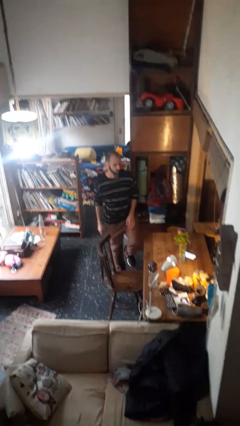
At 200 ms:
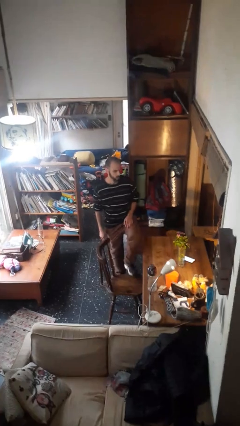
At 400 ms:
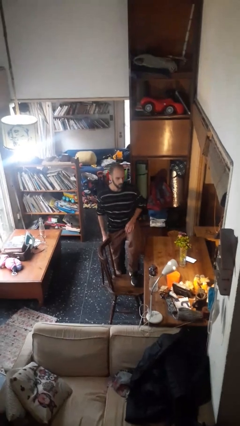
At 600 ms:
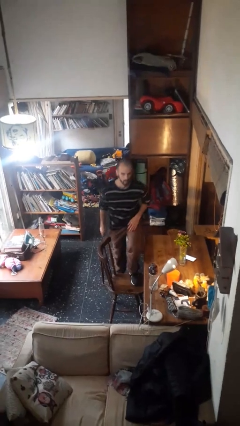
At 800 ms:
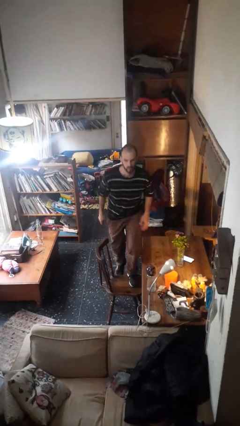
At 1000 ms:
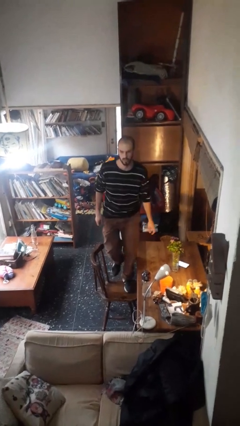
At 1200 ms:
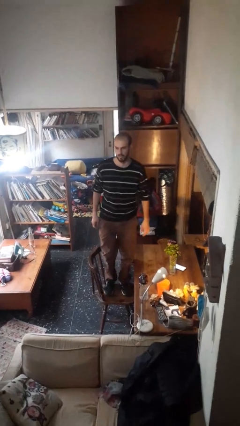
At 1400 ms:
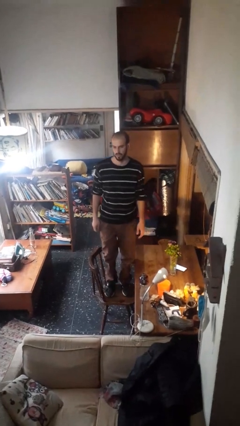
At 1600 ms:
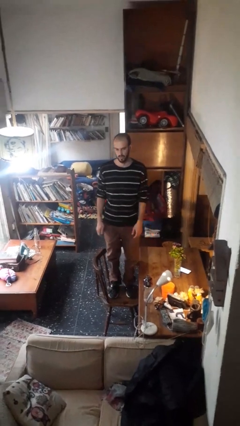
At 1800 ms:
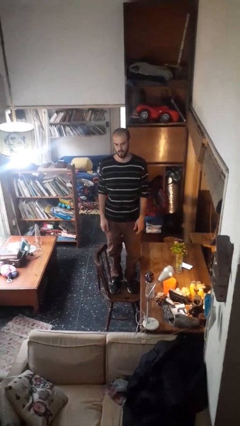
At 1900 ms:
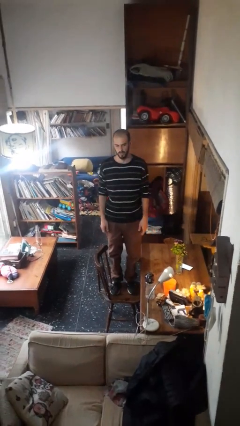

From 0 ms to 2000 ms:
person climbs on chair

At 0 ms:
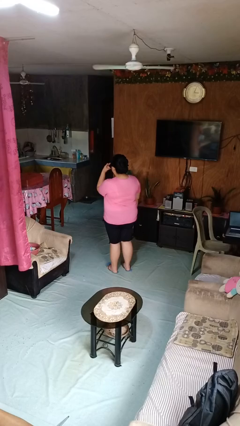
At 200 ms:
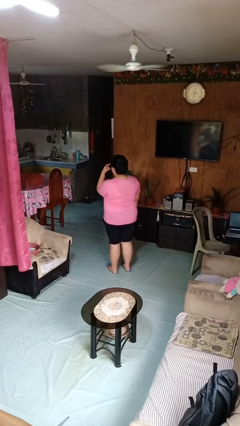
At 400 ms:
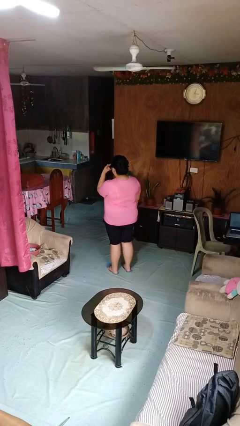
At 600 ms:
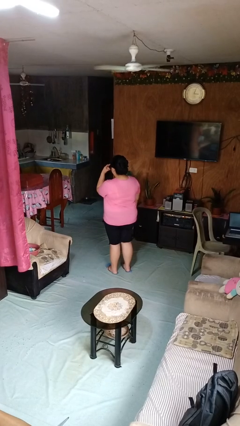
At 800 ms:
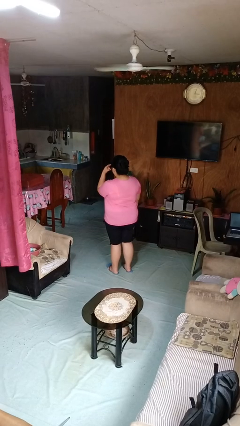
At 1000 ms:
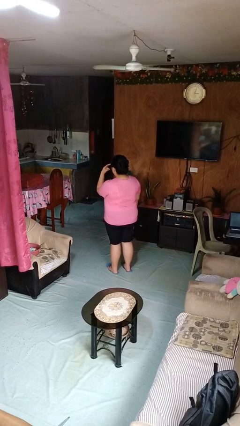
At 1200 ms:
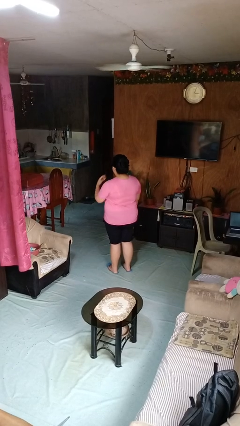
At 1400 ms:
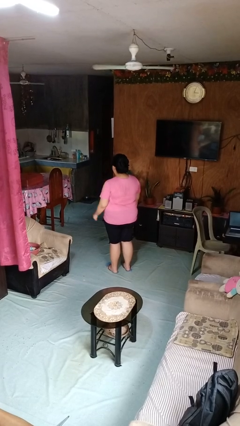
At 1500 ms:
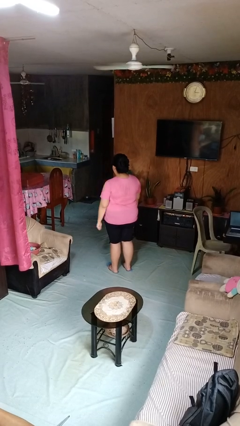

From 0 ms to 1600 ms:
person gestures watch closely

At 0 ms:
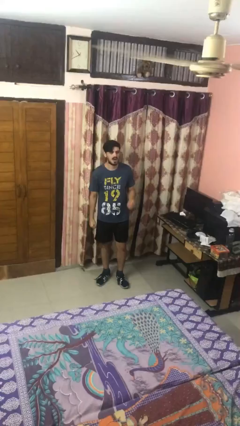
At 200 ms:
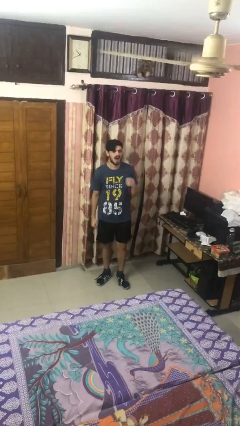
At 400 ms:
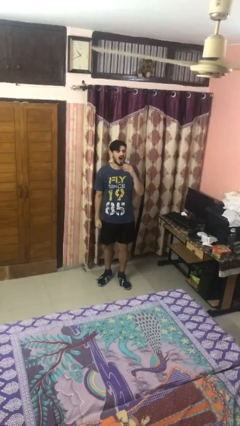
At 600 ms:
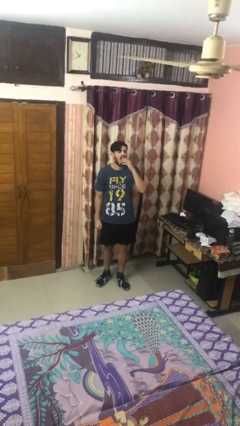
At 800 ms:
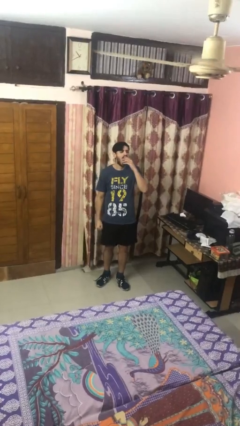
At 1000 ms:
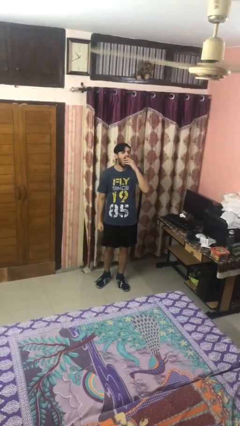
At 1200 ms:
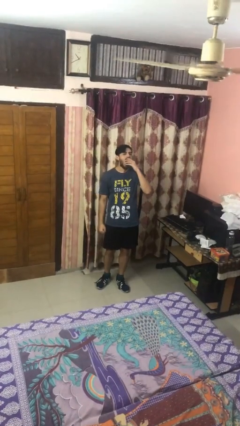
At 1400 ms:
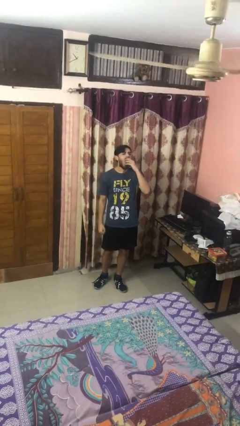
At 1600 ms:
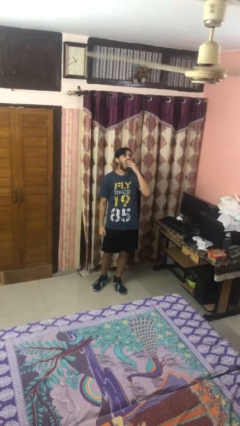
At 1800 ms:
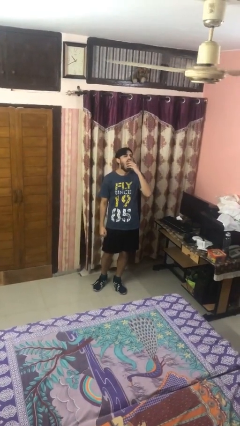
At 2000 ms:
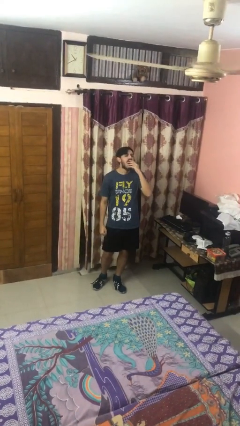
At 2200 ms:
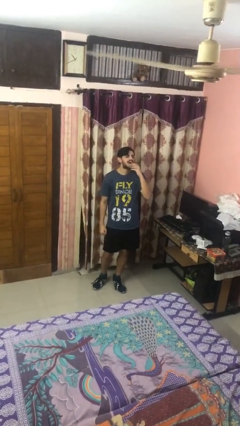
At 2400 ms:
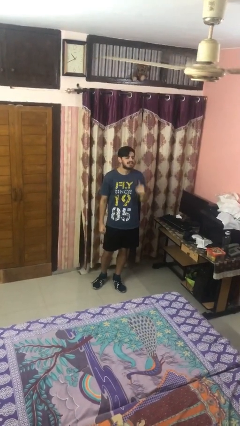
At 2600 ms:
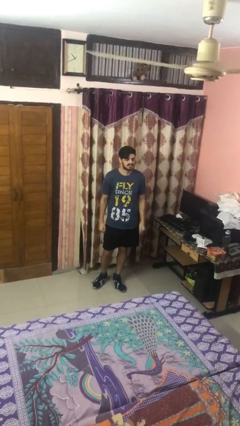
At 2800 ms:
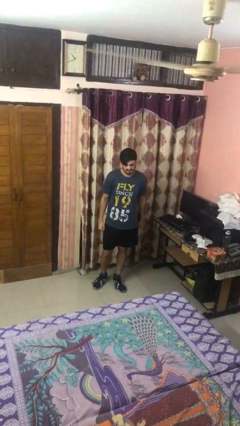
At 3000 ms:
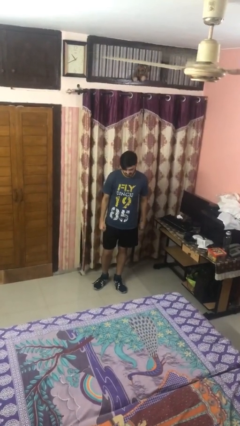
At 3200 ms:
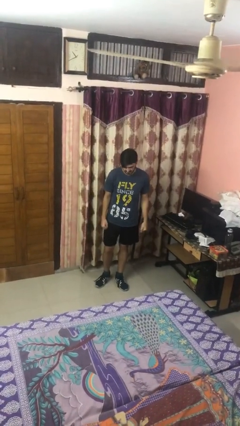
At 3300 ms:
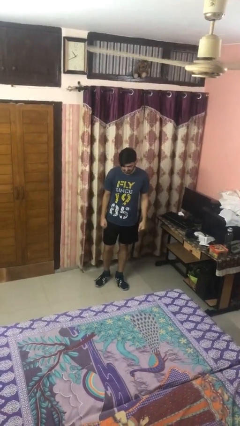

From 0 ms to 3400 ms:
person yawns

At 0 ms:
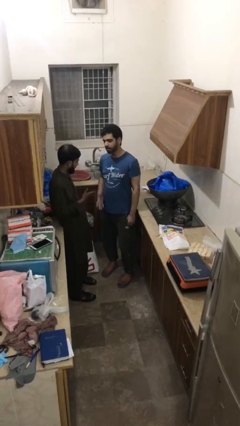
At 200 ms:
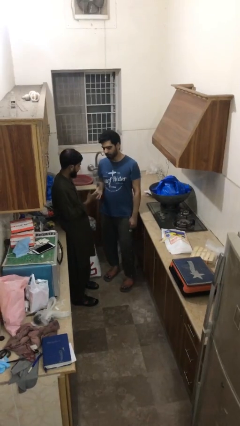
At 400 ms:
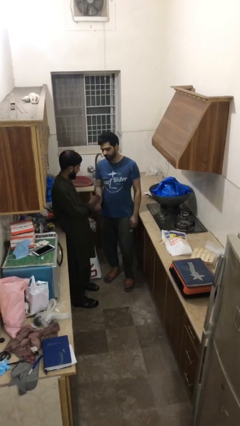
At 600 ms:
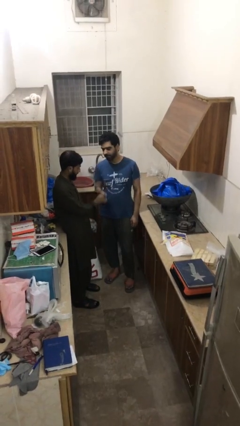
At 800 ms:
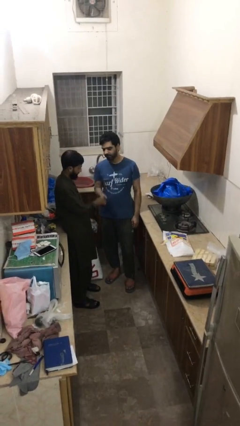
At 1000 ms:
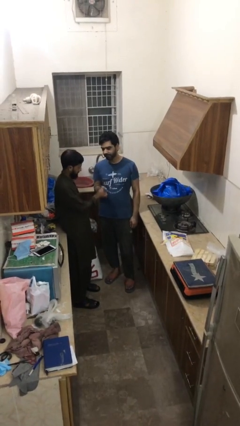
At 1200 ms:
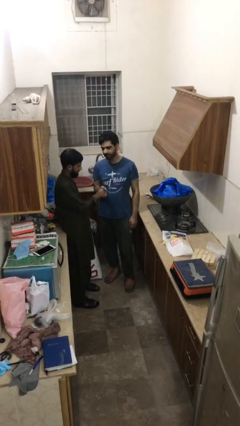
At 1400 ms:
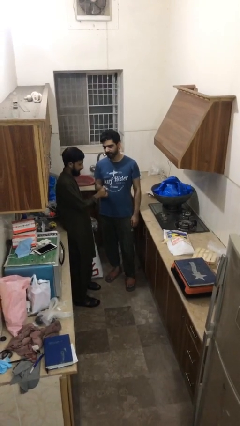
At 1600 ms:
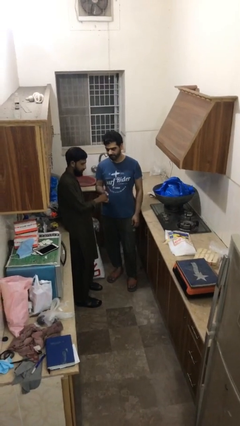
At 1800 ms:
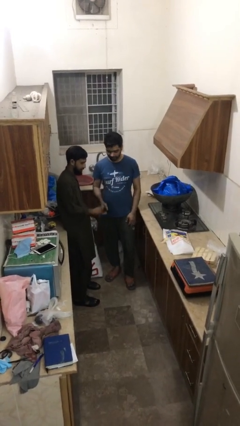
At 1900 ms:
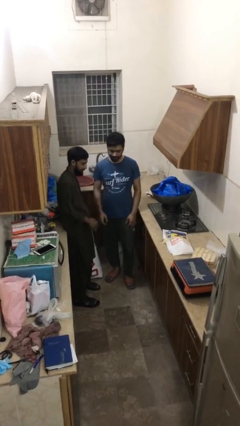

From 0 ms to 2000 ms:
person shakes hand

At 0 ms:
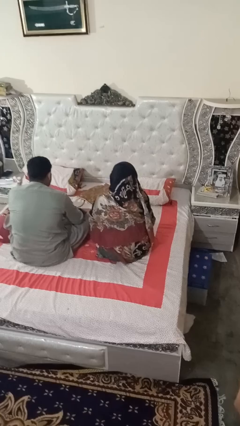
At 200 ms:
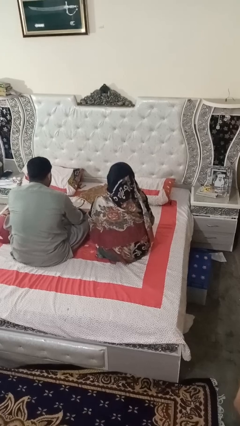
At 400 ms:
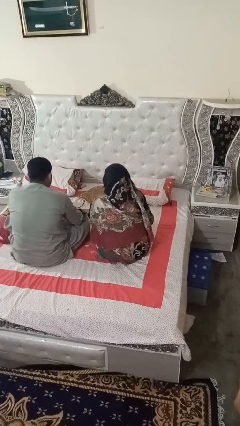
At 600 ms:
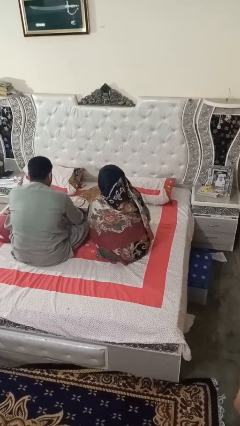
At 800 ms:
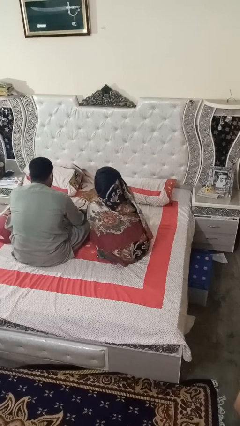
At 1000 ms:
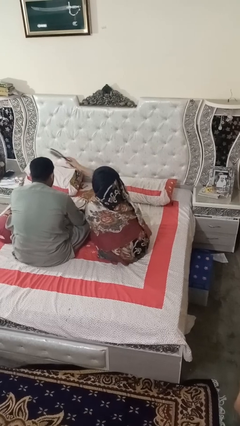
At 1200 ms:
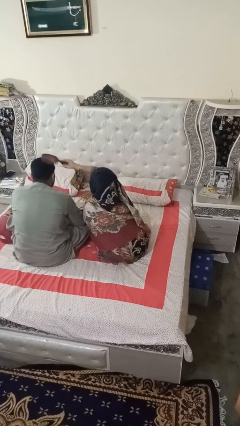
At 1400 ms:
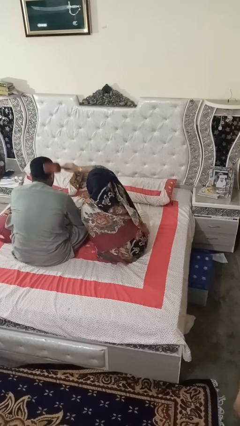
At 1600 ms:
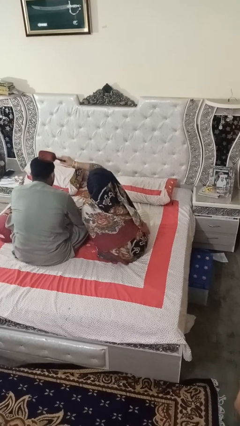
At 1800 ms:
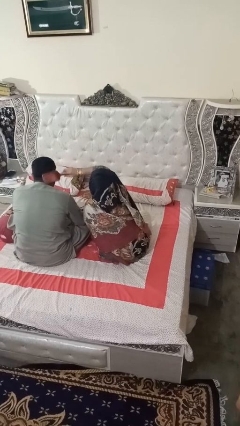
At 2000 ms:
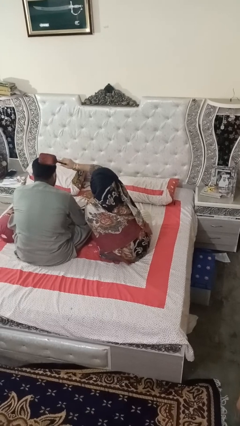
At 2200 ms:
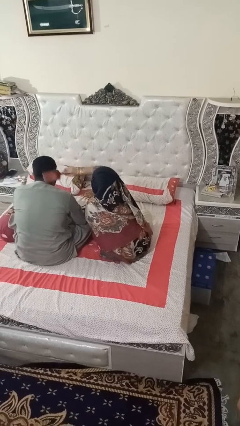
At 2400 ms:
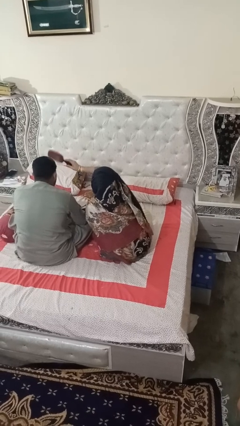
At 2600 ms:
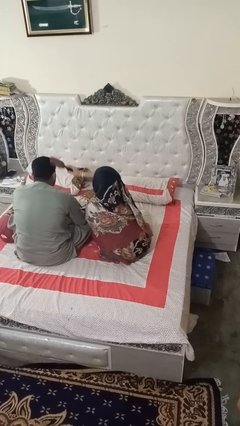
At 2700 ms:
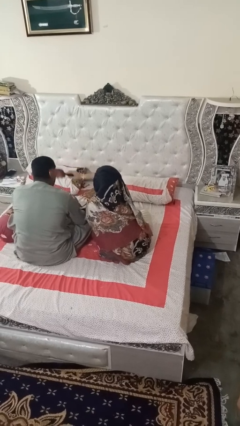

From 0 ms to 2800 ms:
person brushes hair of person

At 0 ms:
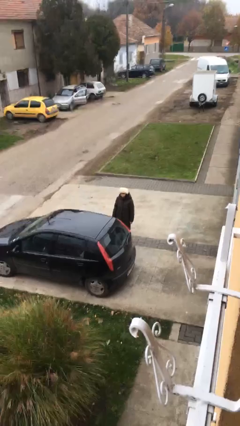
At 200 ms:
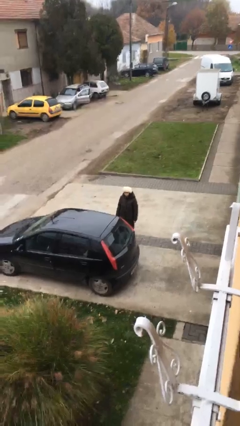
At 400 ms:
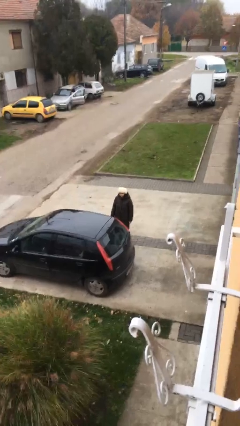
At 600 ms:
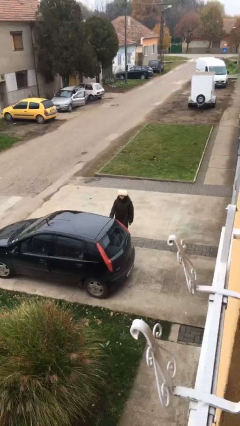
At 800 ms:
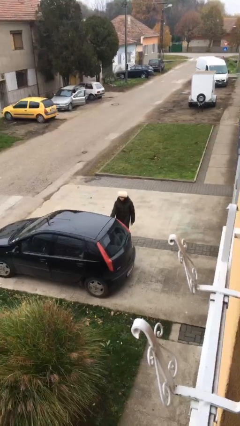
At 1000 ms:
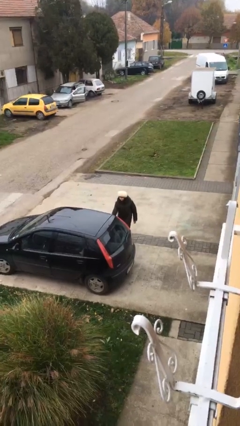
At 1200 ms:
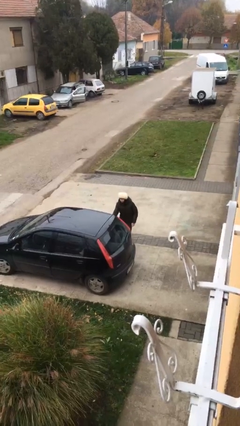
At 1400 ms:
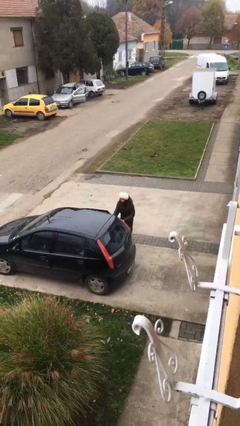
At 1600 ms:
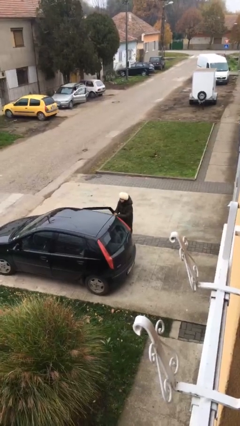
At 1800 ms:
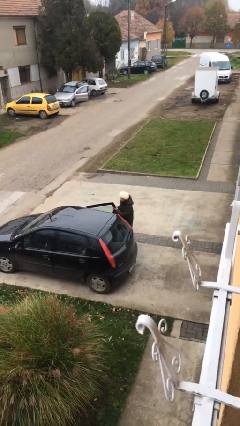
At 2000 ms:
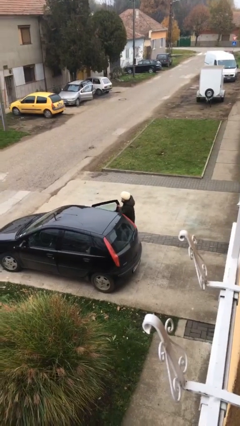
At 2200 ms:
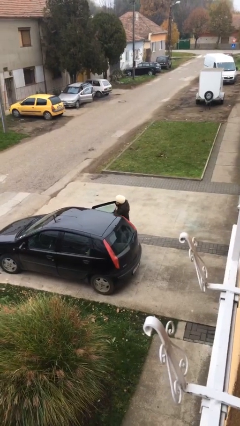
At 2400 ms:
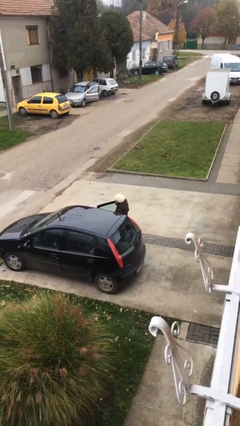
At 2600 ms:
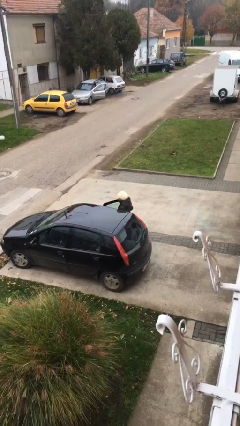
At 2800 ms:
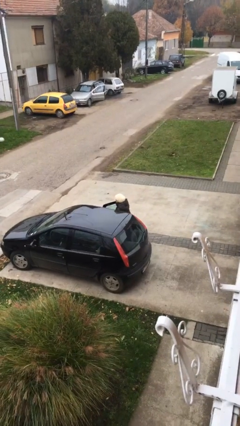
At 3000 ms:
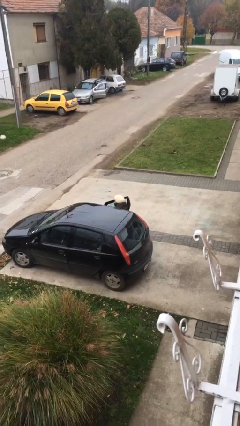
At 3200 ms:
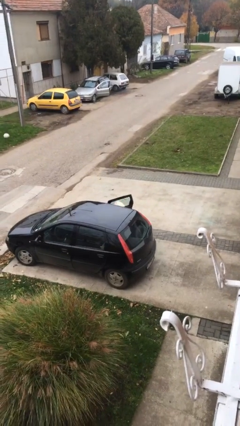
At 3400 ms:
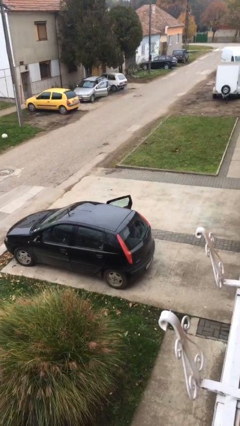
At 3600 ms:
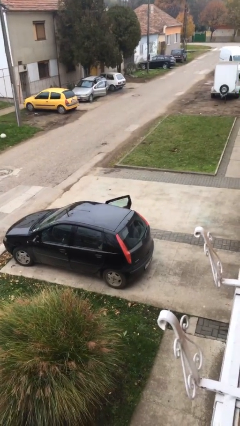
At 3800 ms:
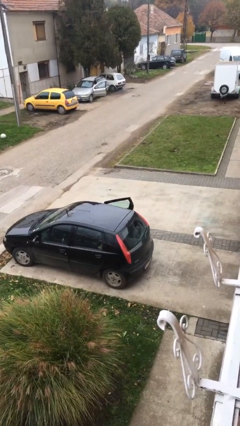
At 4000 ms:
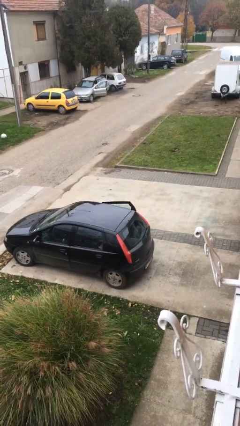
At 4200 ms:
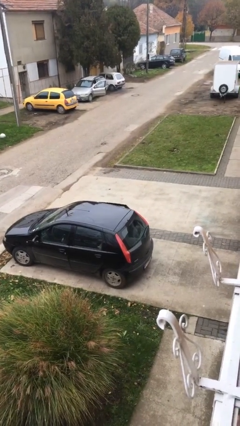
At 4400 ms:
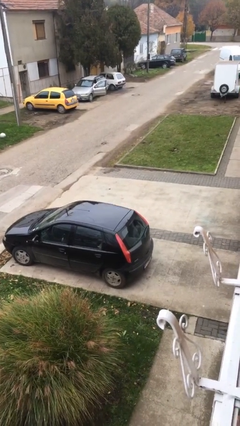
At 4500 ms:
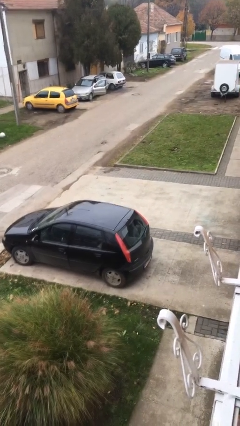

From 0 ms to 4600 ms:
person enters car

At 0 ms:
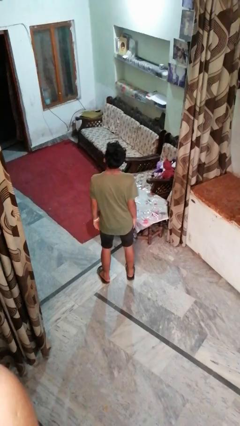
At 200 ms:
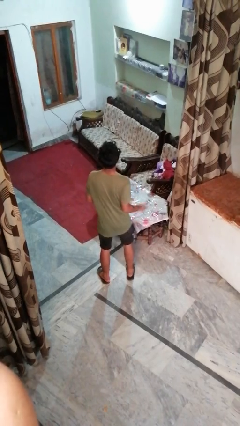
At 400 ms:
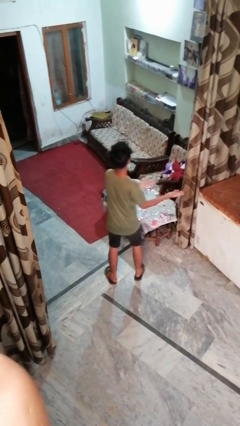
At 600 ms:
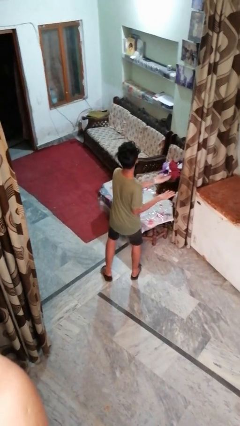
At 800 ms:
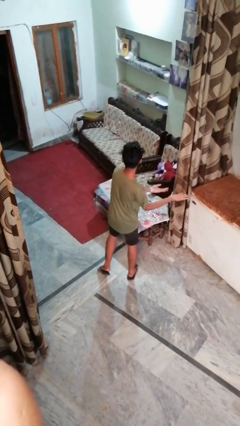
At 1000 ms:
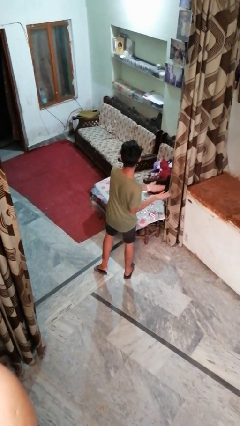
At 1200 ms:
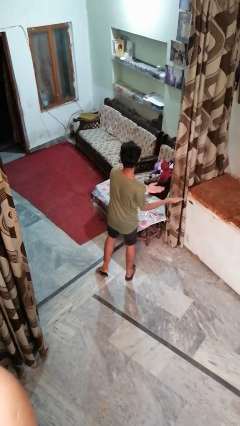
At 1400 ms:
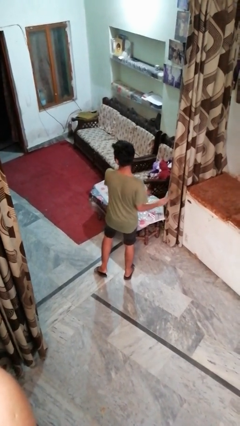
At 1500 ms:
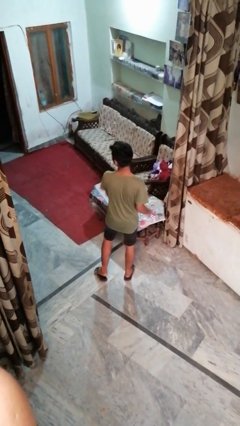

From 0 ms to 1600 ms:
person dances in place
